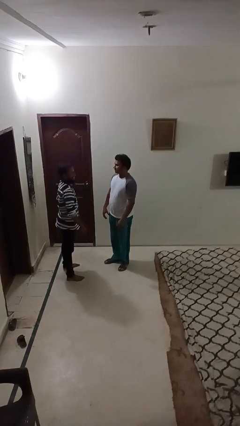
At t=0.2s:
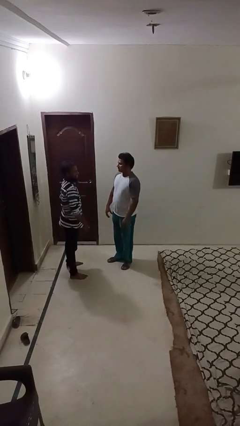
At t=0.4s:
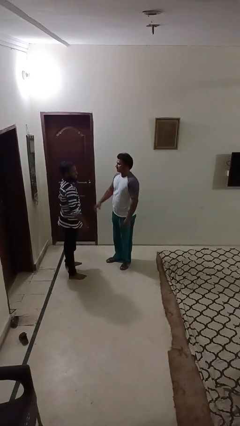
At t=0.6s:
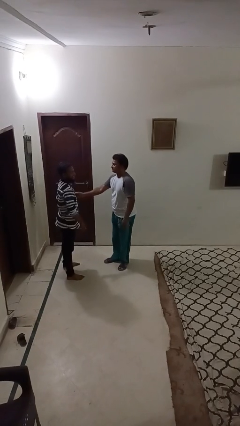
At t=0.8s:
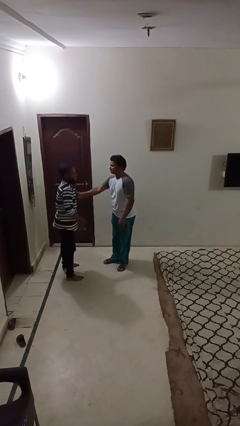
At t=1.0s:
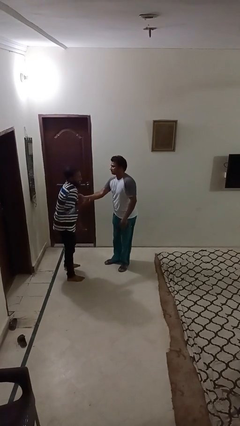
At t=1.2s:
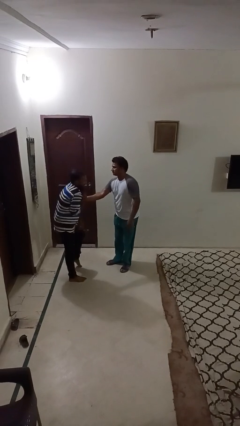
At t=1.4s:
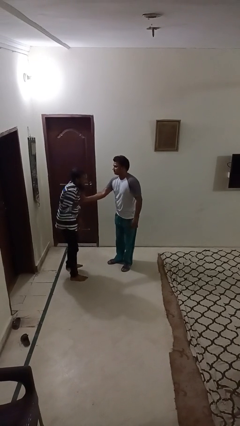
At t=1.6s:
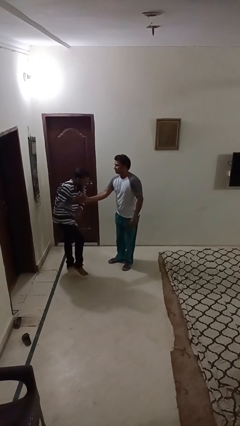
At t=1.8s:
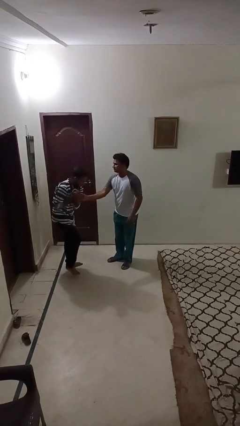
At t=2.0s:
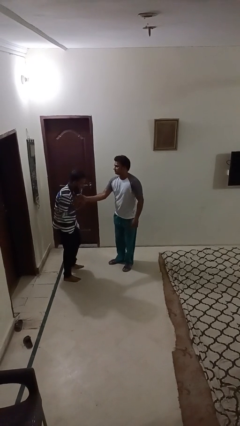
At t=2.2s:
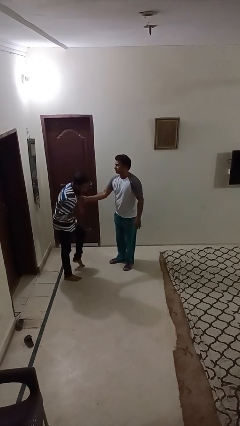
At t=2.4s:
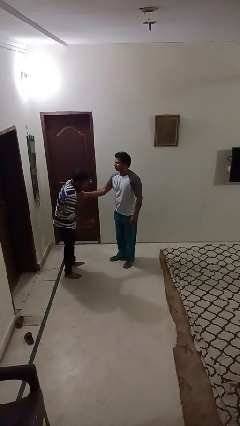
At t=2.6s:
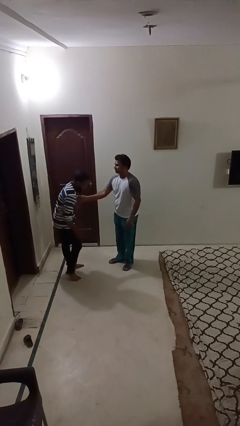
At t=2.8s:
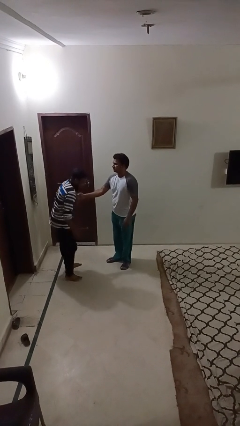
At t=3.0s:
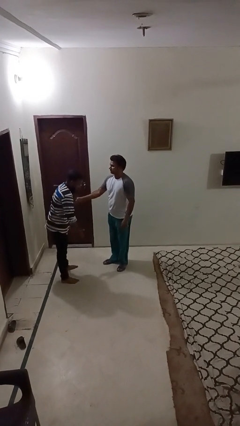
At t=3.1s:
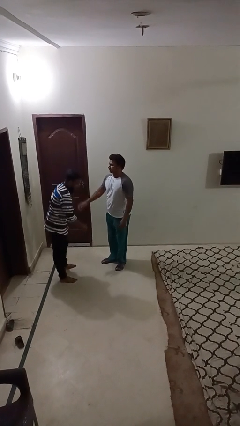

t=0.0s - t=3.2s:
person tickles person

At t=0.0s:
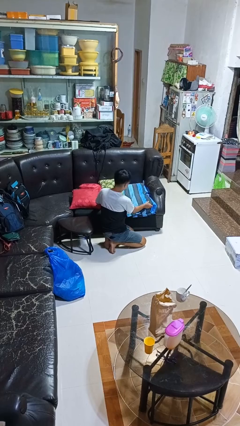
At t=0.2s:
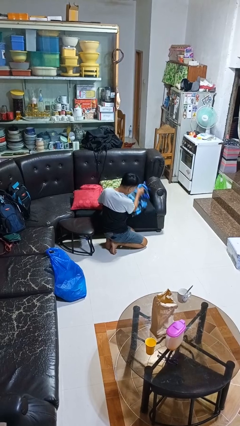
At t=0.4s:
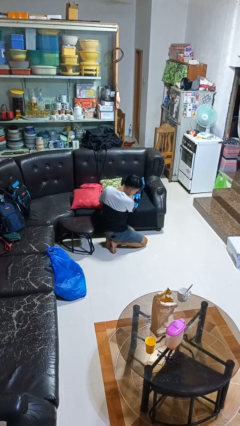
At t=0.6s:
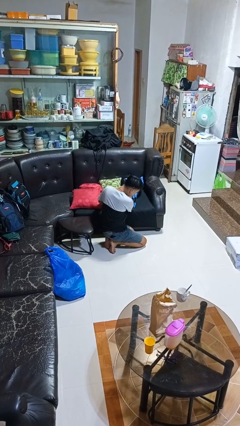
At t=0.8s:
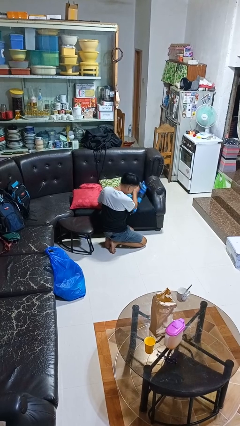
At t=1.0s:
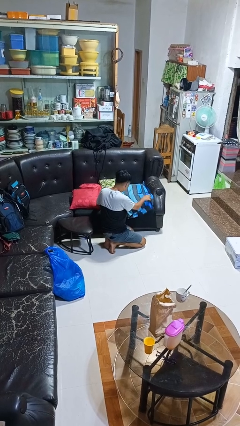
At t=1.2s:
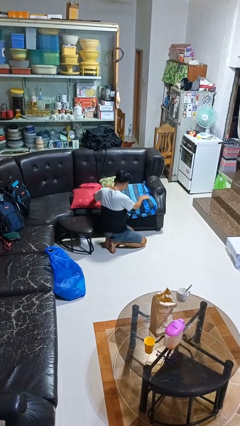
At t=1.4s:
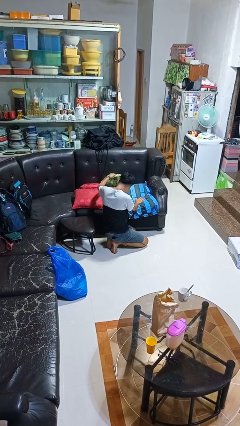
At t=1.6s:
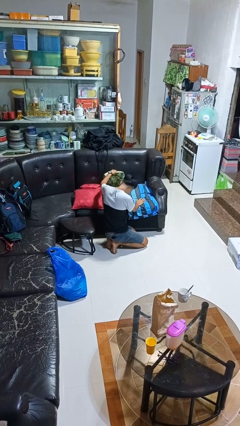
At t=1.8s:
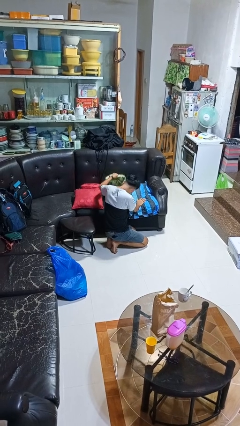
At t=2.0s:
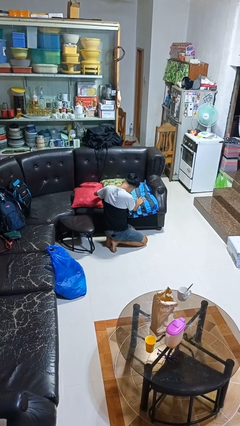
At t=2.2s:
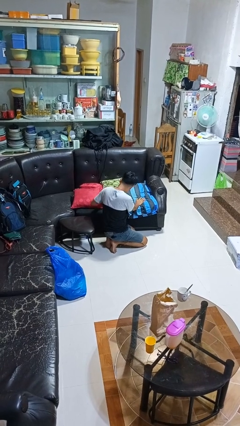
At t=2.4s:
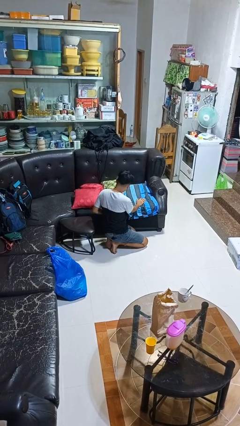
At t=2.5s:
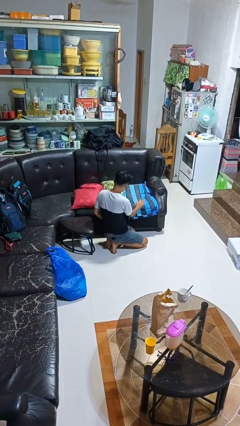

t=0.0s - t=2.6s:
person searches in couch

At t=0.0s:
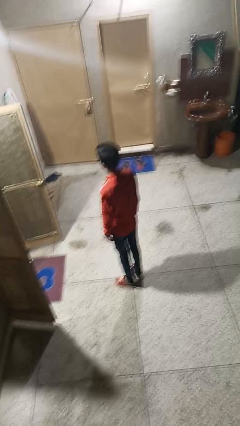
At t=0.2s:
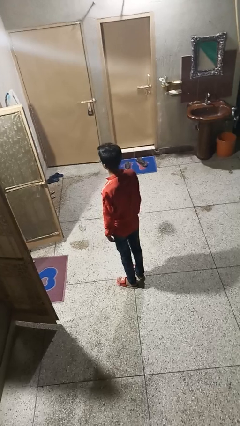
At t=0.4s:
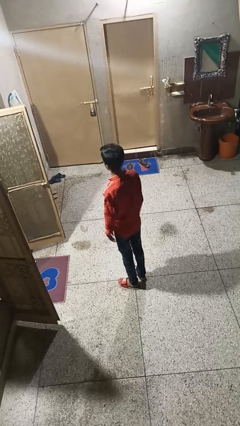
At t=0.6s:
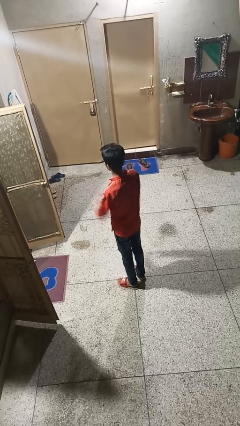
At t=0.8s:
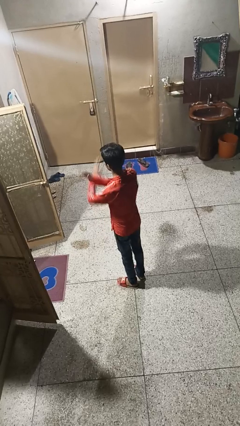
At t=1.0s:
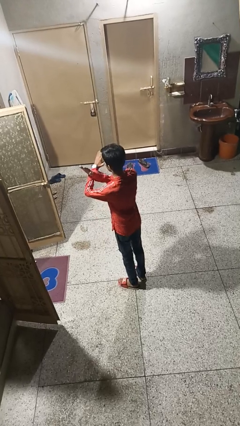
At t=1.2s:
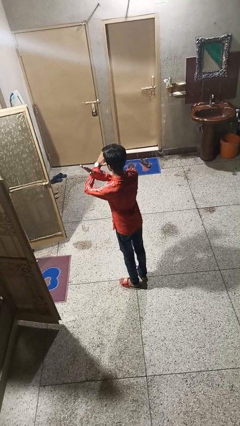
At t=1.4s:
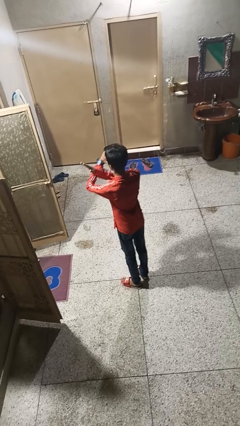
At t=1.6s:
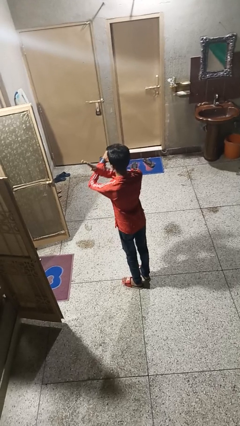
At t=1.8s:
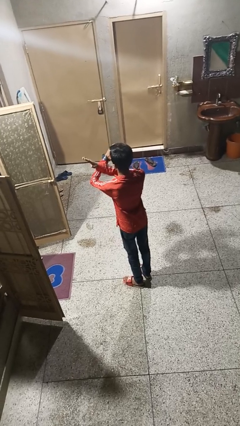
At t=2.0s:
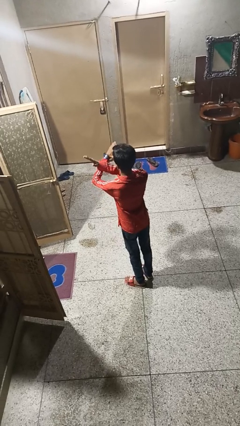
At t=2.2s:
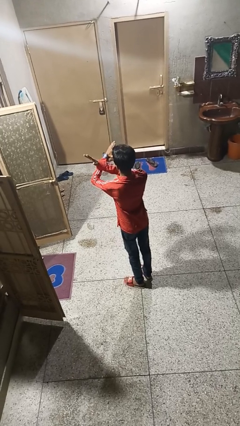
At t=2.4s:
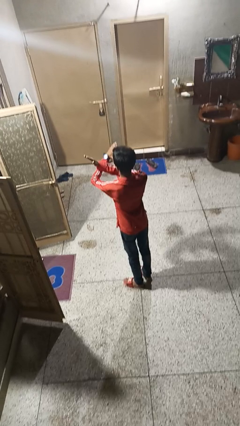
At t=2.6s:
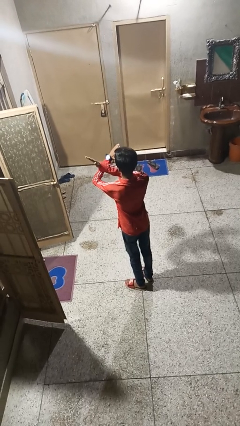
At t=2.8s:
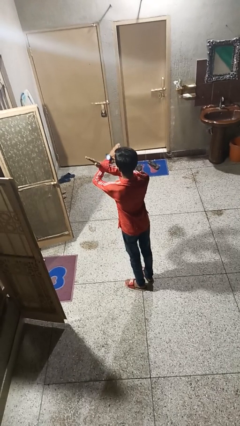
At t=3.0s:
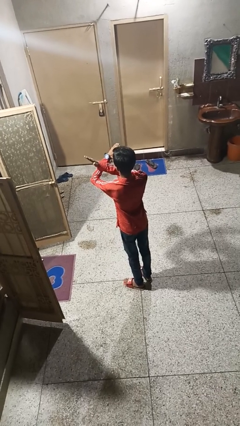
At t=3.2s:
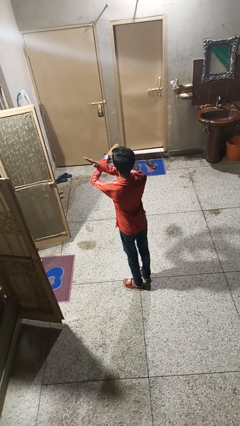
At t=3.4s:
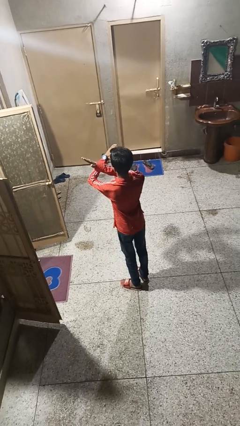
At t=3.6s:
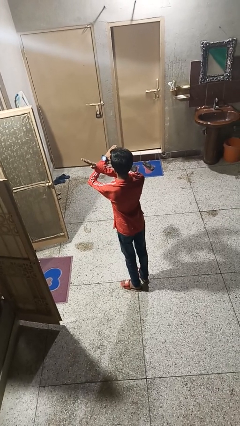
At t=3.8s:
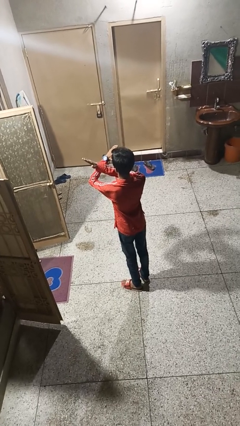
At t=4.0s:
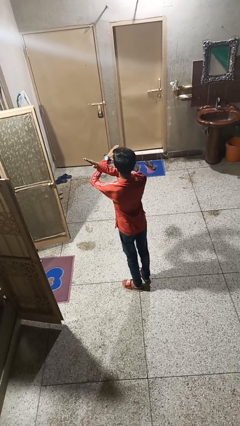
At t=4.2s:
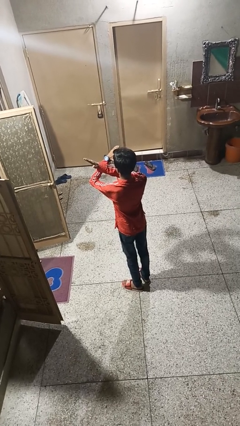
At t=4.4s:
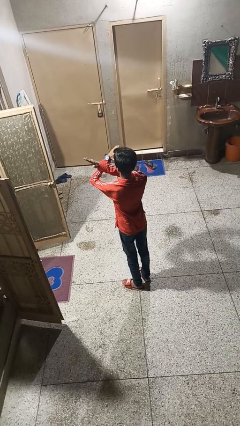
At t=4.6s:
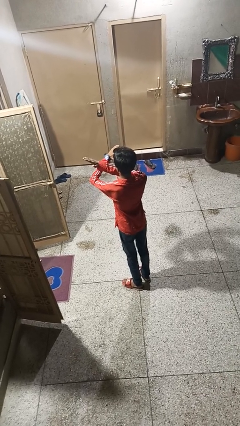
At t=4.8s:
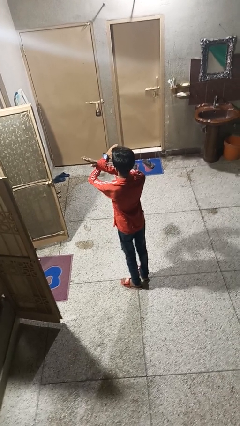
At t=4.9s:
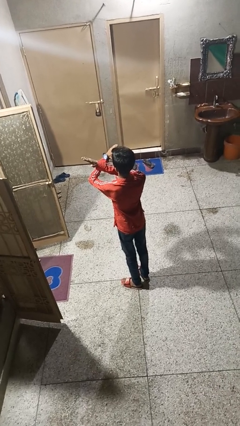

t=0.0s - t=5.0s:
person gestures arms x

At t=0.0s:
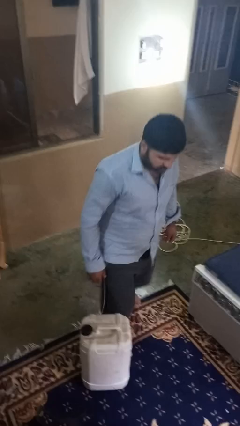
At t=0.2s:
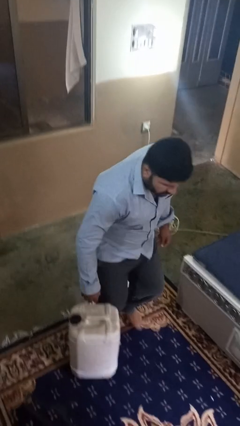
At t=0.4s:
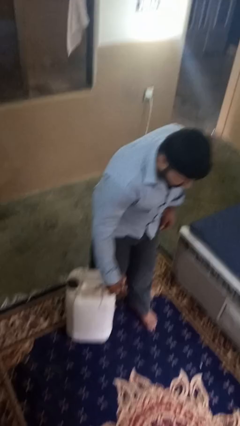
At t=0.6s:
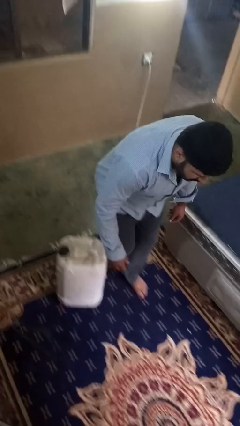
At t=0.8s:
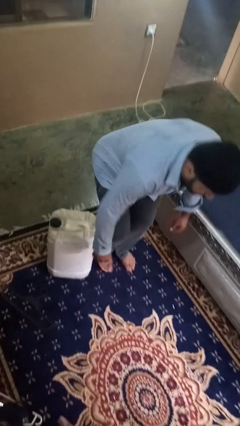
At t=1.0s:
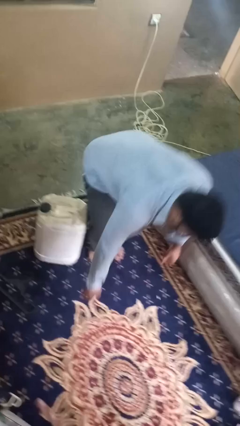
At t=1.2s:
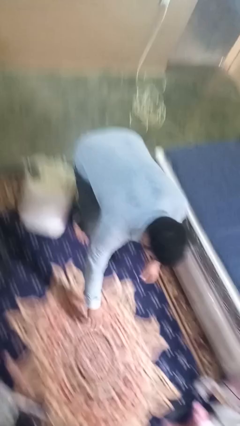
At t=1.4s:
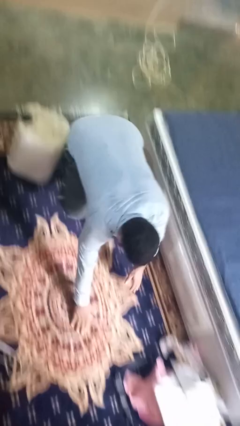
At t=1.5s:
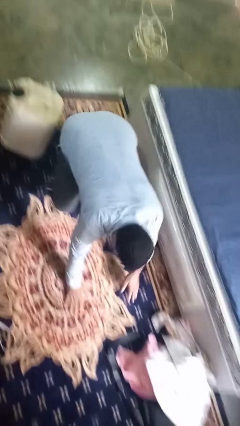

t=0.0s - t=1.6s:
person trips on object on floor

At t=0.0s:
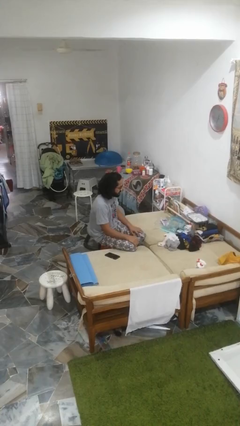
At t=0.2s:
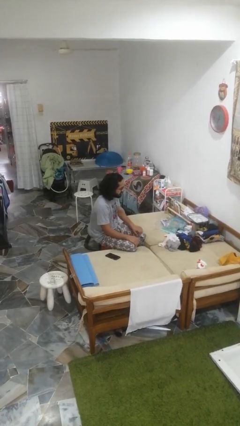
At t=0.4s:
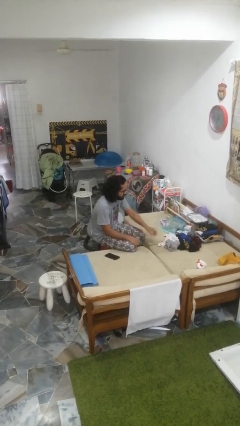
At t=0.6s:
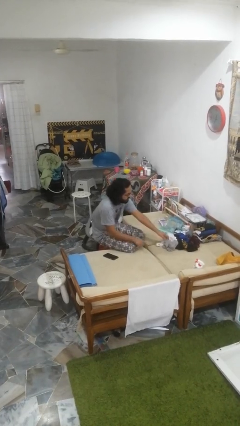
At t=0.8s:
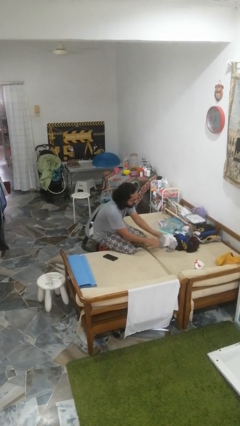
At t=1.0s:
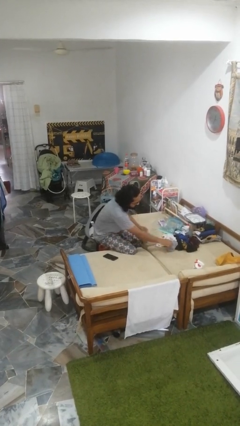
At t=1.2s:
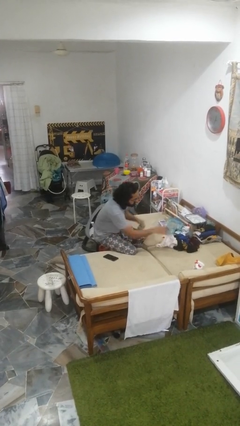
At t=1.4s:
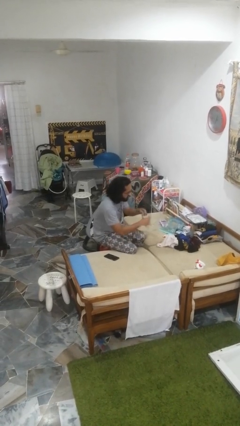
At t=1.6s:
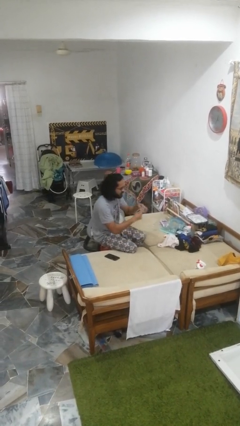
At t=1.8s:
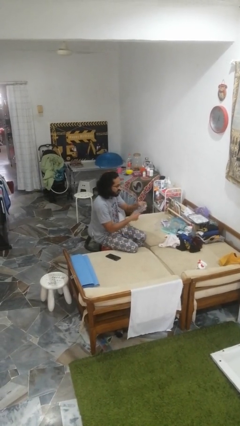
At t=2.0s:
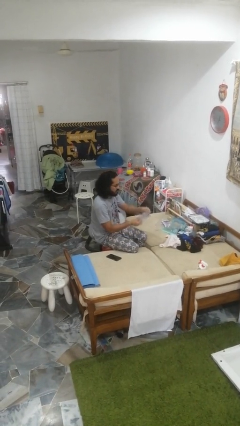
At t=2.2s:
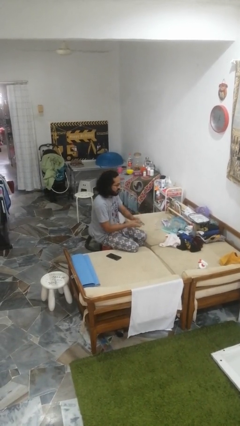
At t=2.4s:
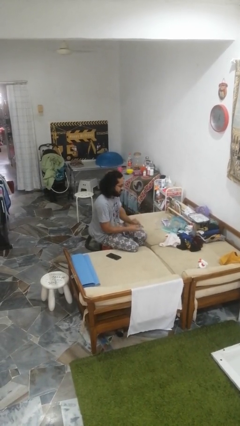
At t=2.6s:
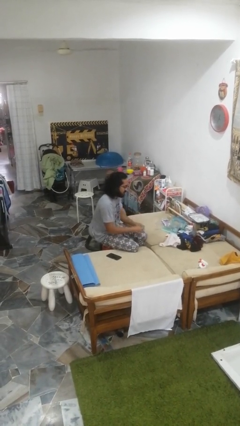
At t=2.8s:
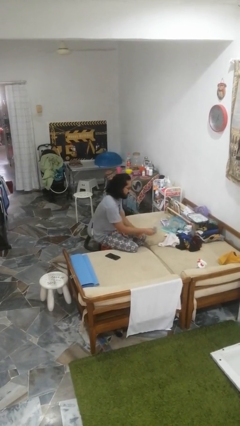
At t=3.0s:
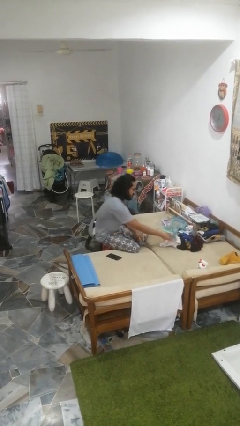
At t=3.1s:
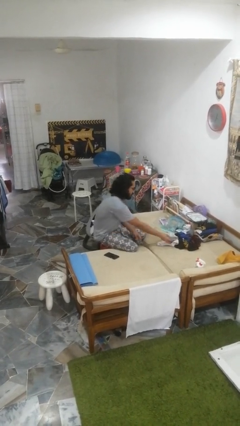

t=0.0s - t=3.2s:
person folds socks

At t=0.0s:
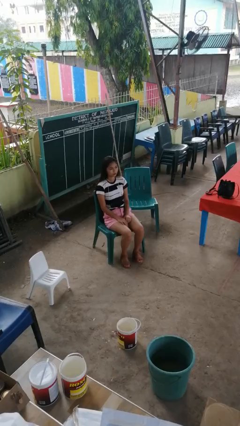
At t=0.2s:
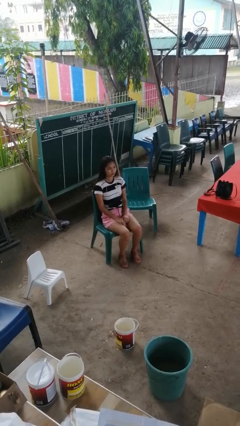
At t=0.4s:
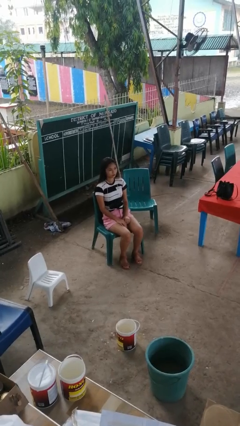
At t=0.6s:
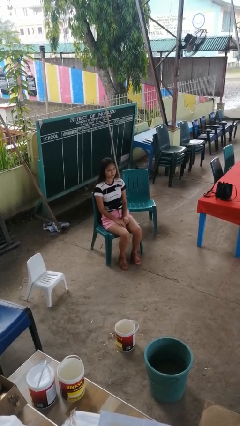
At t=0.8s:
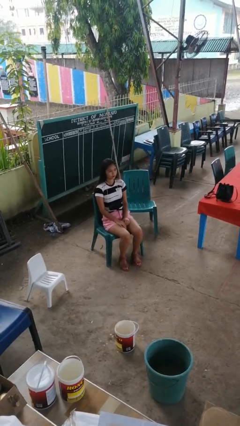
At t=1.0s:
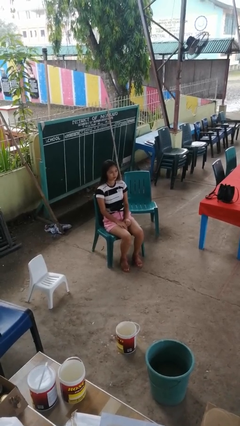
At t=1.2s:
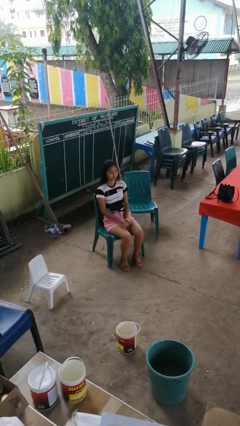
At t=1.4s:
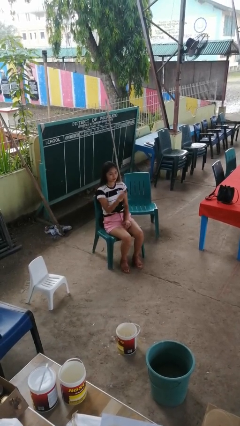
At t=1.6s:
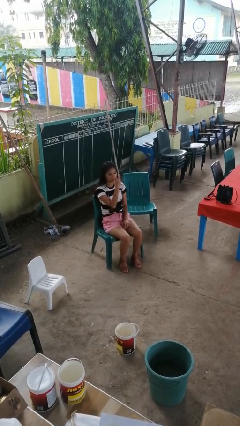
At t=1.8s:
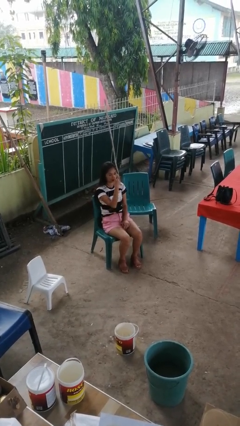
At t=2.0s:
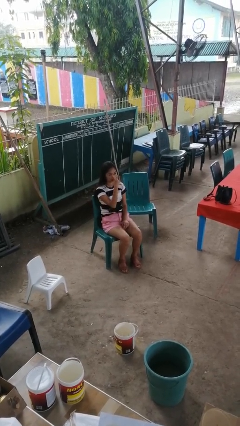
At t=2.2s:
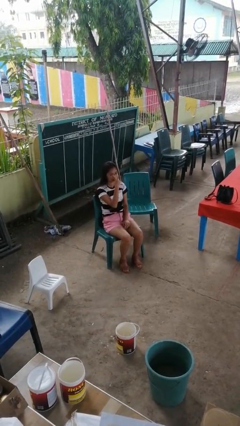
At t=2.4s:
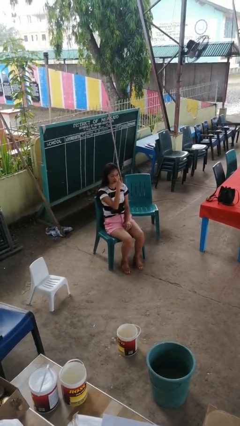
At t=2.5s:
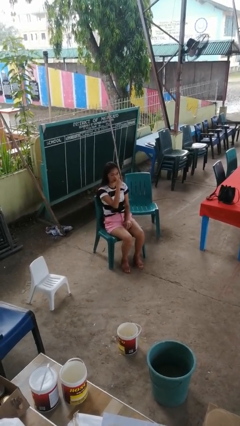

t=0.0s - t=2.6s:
person gestures watch closely
